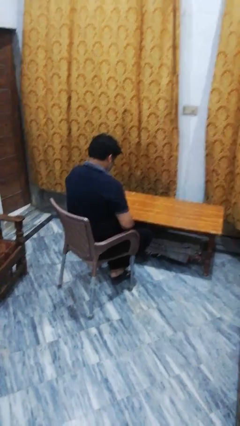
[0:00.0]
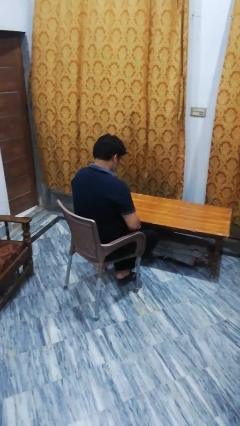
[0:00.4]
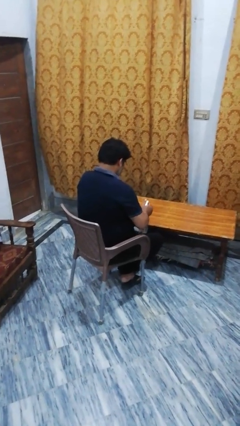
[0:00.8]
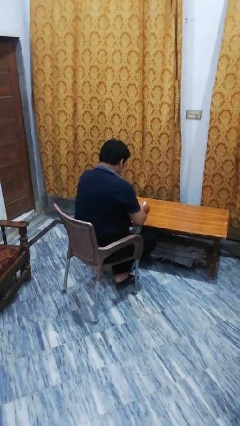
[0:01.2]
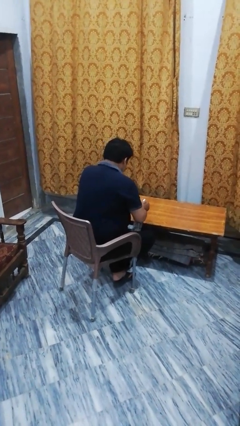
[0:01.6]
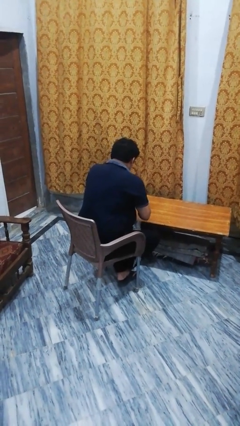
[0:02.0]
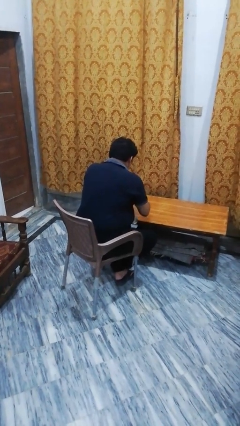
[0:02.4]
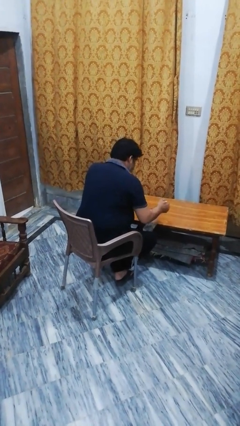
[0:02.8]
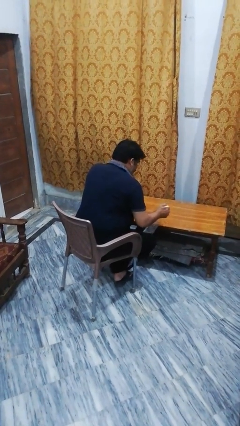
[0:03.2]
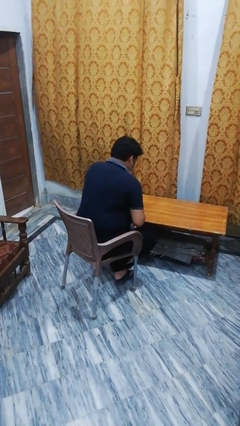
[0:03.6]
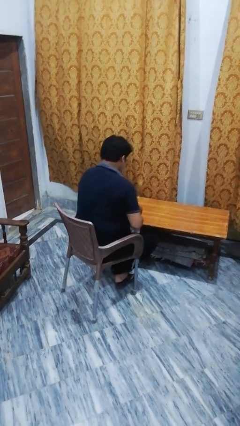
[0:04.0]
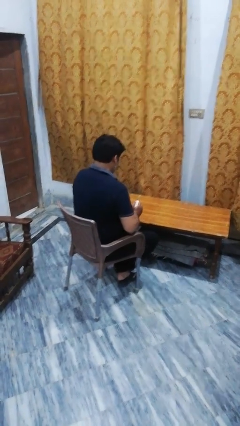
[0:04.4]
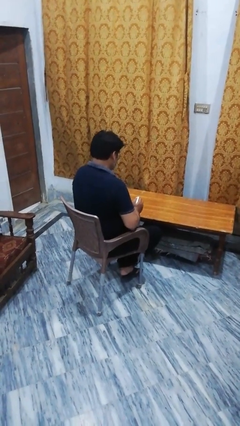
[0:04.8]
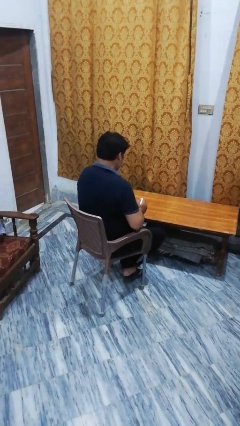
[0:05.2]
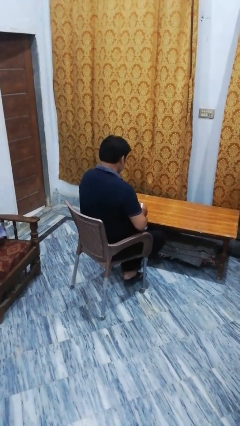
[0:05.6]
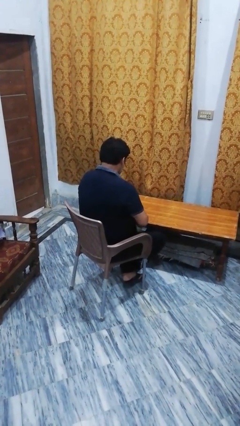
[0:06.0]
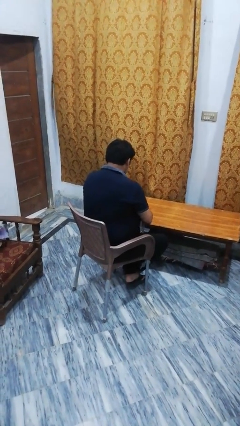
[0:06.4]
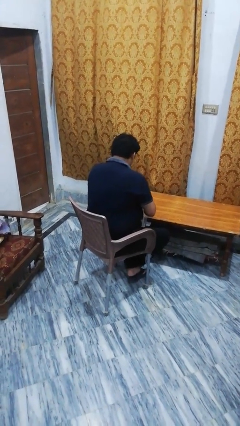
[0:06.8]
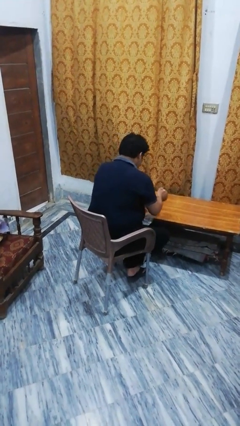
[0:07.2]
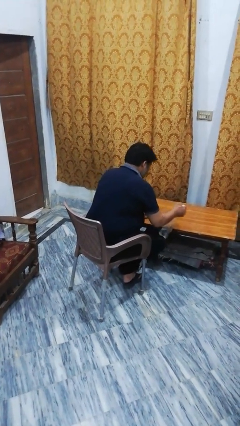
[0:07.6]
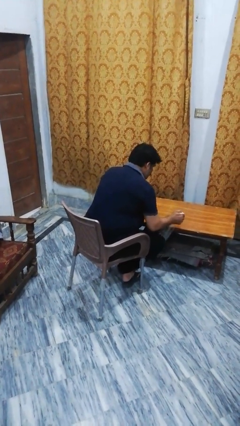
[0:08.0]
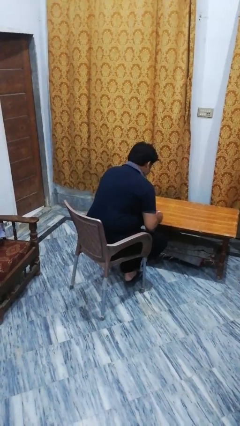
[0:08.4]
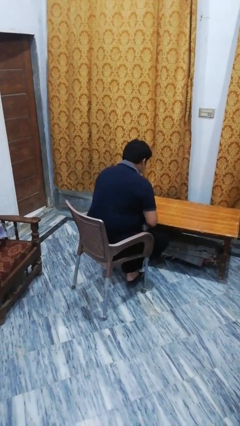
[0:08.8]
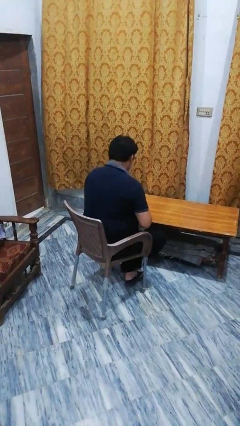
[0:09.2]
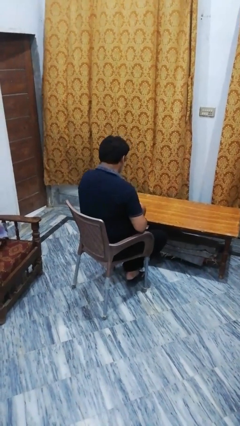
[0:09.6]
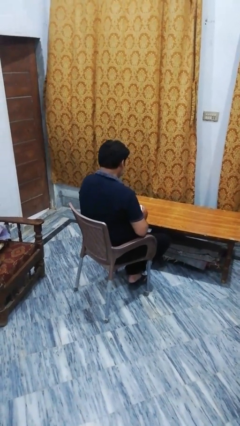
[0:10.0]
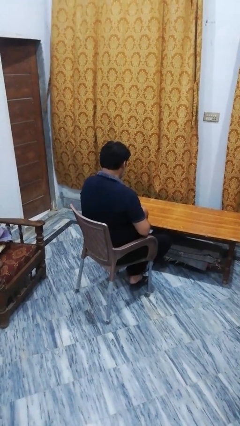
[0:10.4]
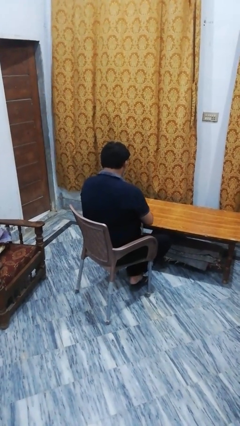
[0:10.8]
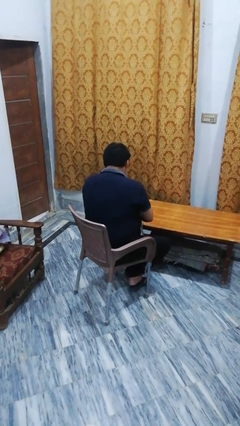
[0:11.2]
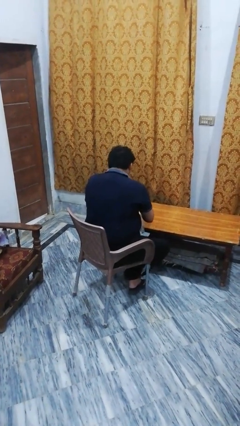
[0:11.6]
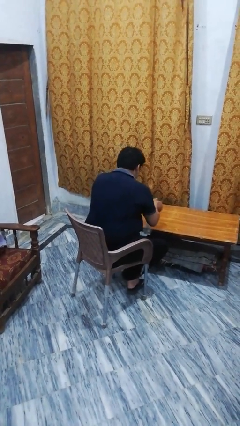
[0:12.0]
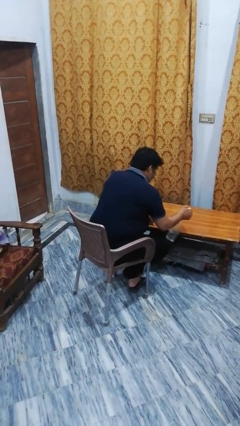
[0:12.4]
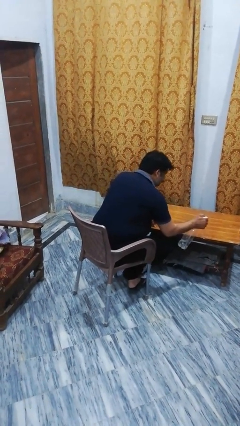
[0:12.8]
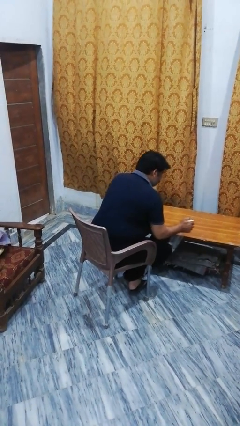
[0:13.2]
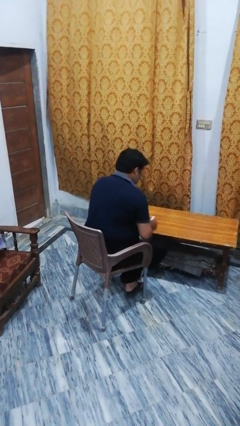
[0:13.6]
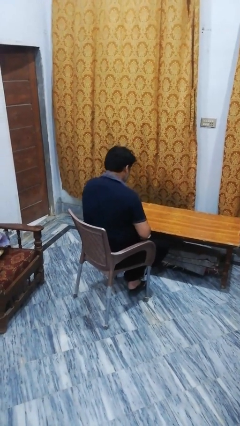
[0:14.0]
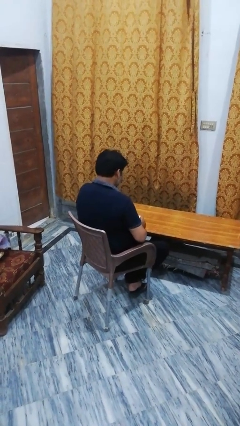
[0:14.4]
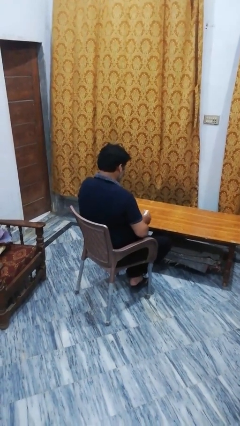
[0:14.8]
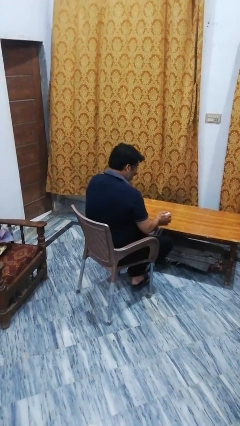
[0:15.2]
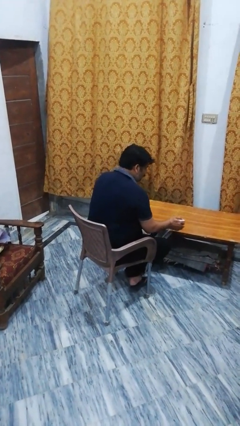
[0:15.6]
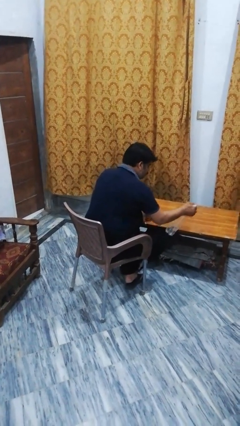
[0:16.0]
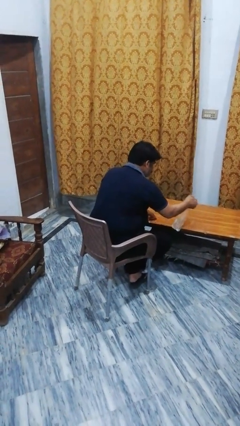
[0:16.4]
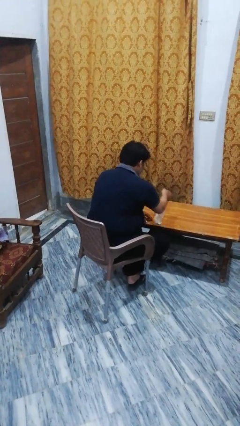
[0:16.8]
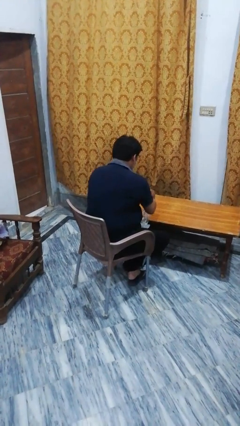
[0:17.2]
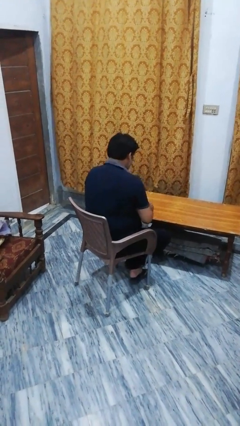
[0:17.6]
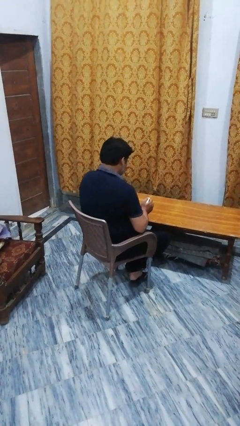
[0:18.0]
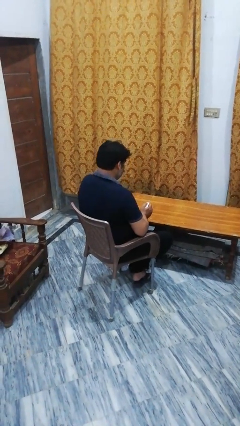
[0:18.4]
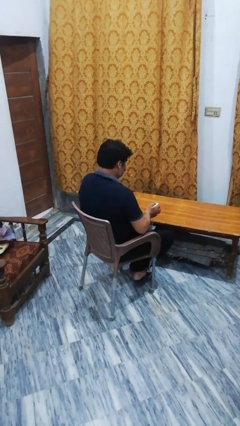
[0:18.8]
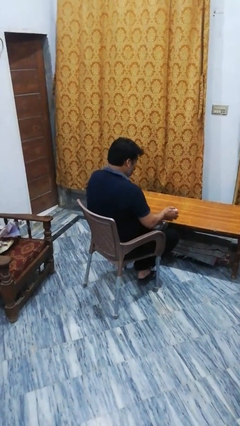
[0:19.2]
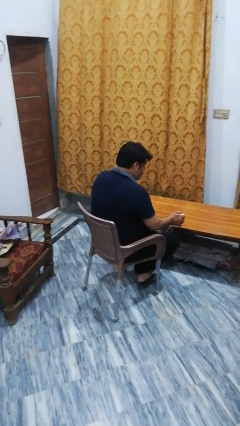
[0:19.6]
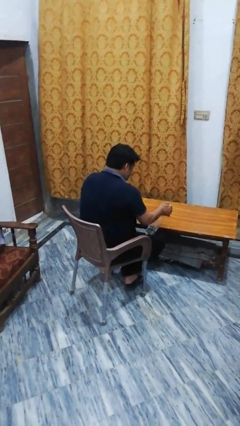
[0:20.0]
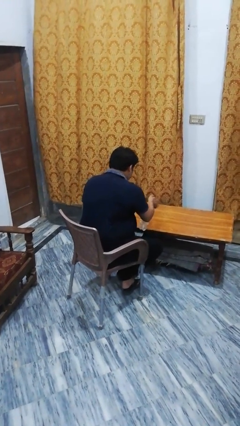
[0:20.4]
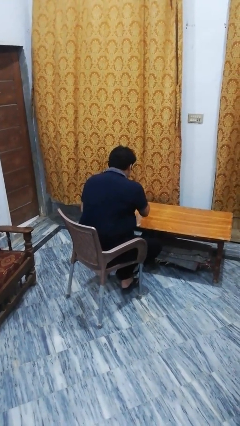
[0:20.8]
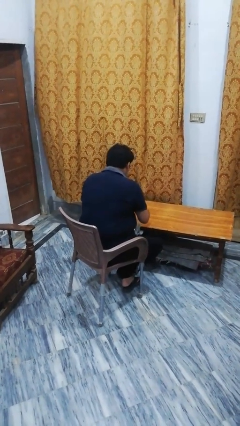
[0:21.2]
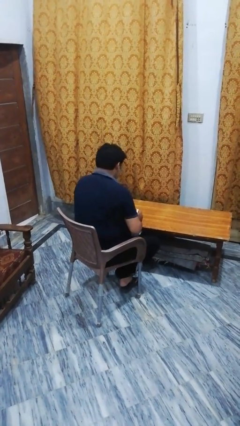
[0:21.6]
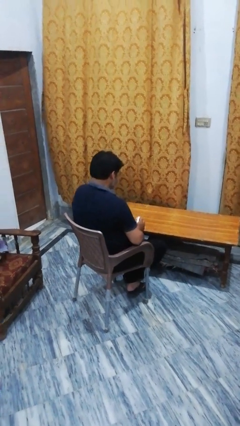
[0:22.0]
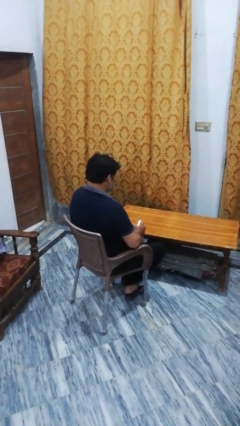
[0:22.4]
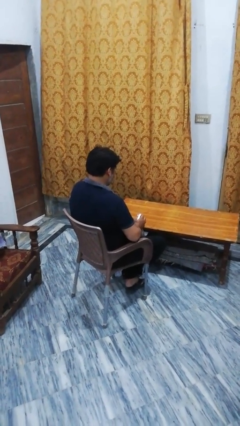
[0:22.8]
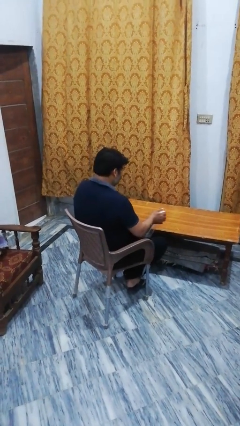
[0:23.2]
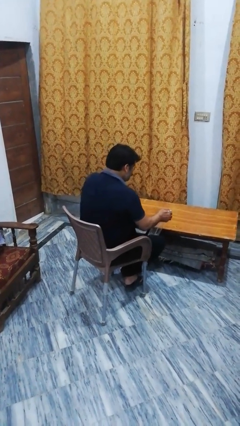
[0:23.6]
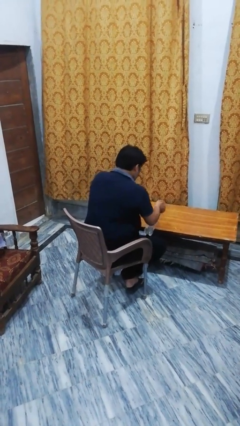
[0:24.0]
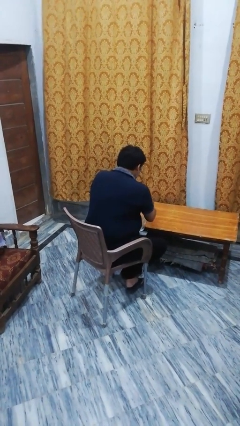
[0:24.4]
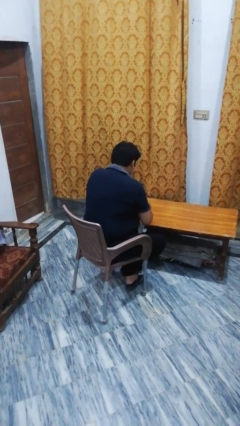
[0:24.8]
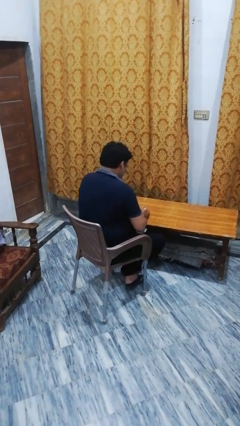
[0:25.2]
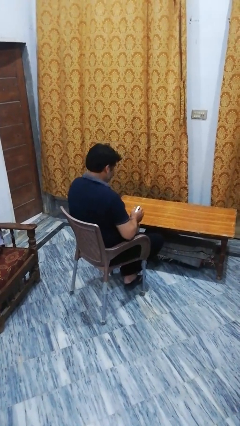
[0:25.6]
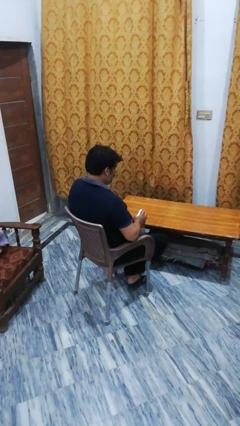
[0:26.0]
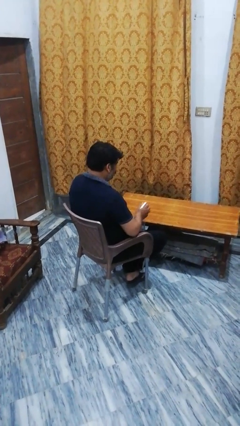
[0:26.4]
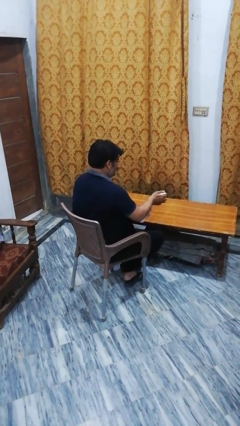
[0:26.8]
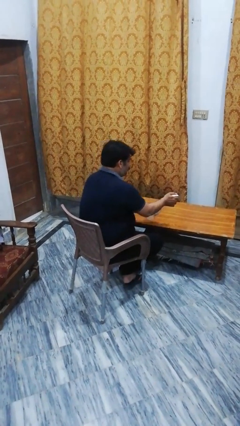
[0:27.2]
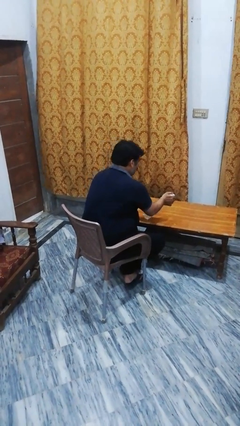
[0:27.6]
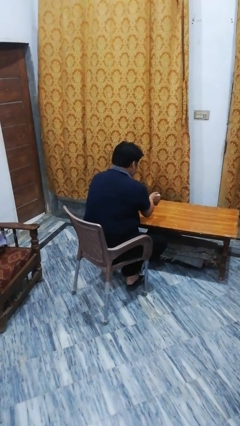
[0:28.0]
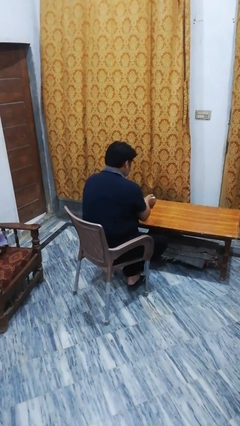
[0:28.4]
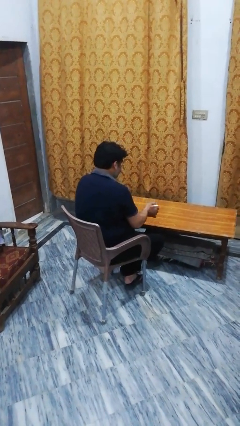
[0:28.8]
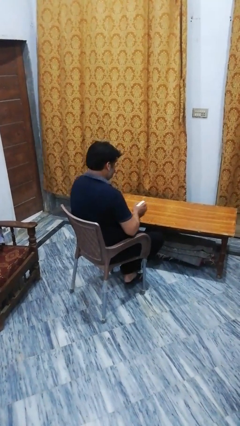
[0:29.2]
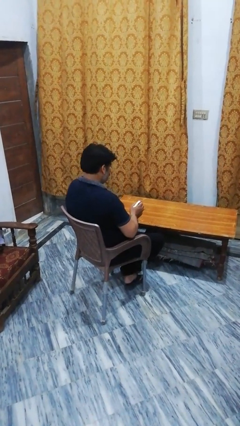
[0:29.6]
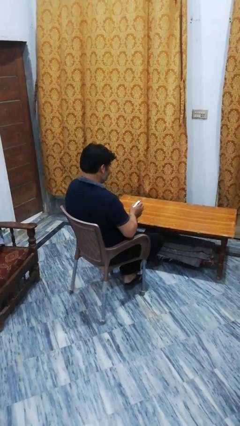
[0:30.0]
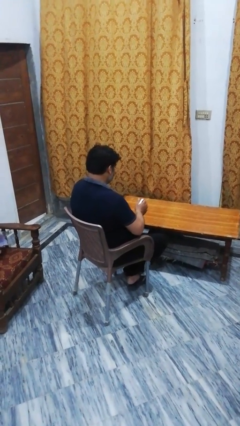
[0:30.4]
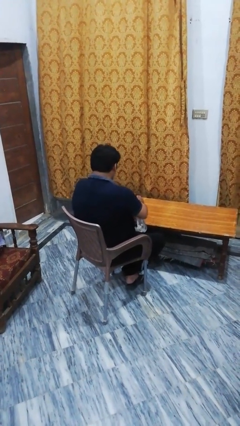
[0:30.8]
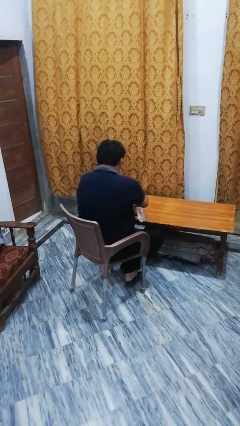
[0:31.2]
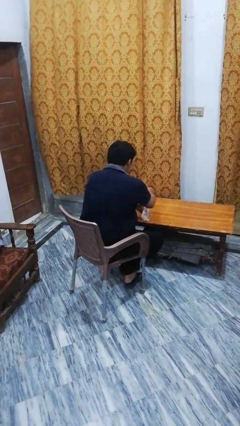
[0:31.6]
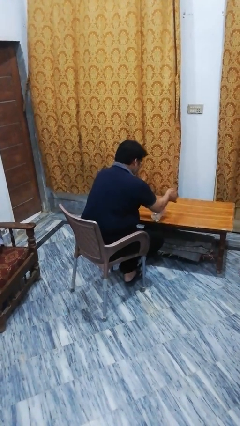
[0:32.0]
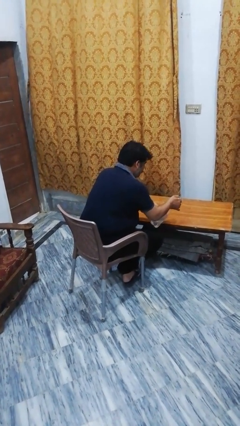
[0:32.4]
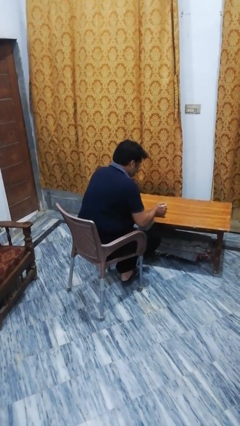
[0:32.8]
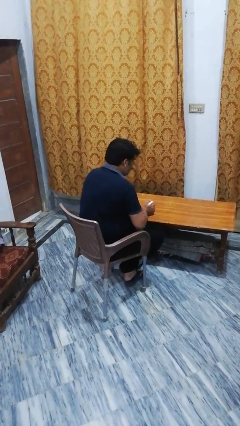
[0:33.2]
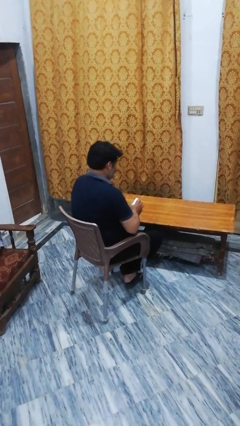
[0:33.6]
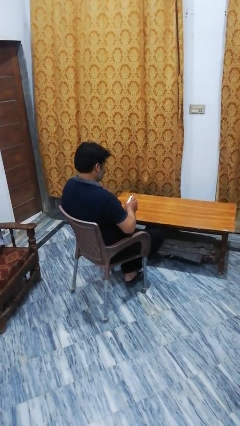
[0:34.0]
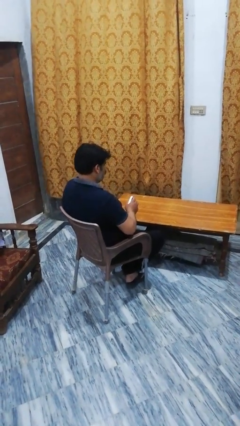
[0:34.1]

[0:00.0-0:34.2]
person sprays from bottle

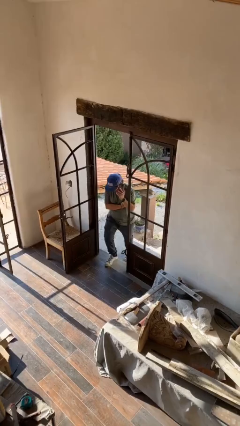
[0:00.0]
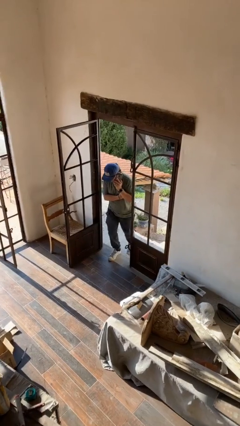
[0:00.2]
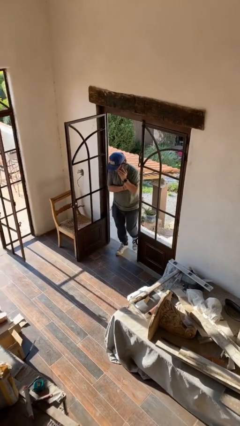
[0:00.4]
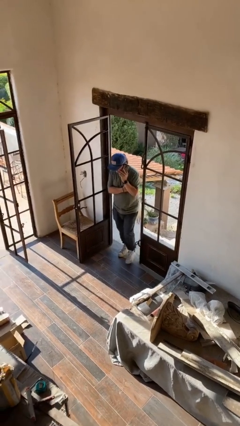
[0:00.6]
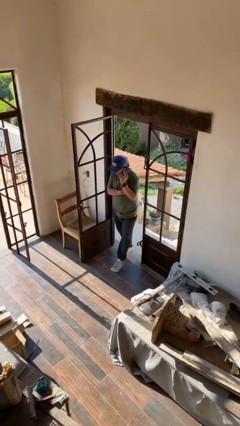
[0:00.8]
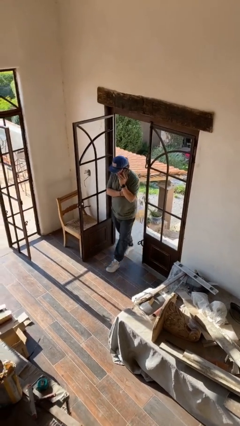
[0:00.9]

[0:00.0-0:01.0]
person enters scene through structure
